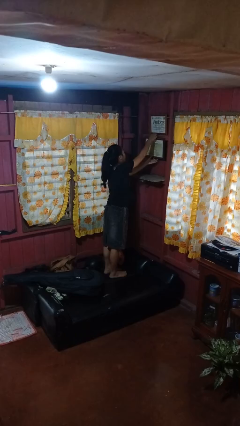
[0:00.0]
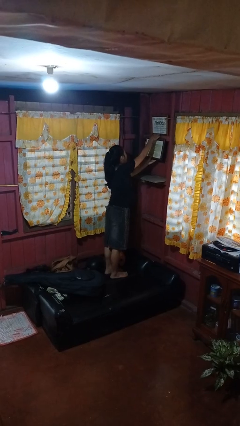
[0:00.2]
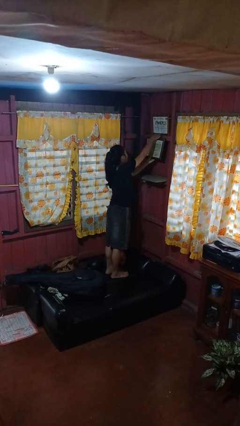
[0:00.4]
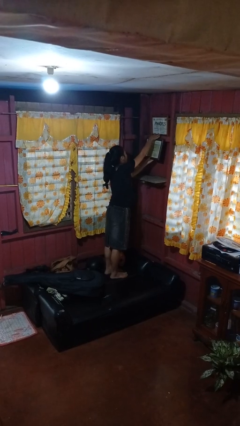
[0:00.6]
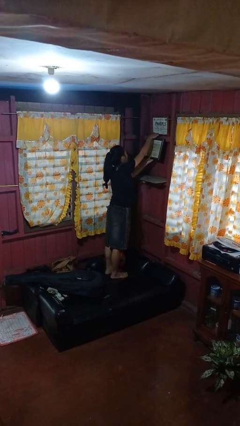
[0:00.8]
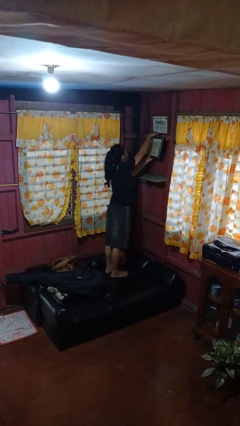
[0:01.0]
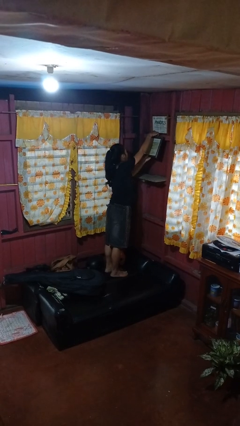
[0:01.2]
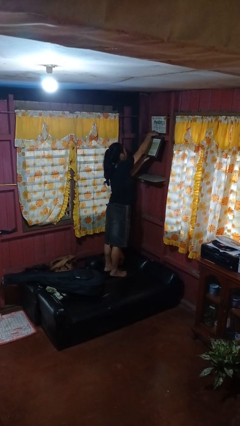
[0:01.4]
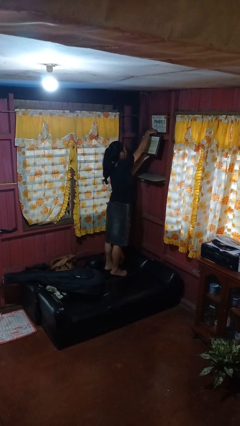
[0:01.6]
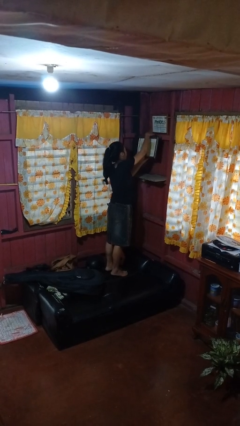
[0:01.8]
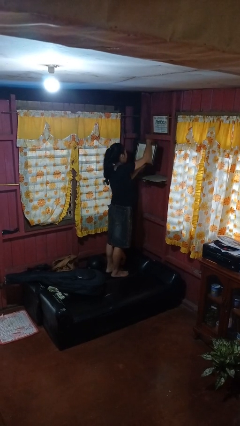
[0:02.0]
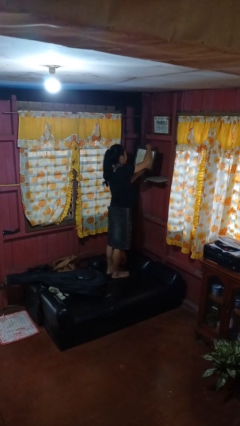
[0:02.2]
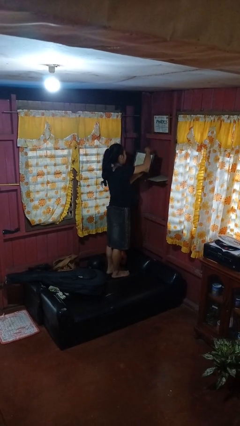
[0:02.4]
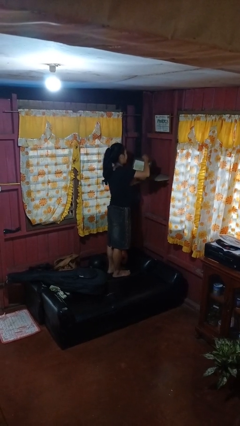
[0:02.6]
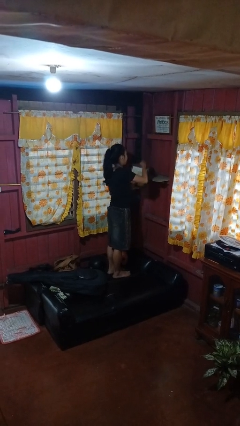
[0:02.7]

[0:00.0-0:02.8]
person takes down picture frame

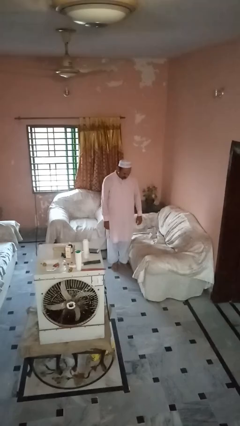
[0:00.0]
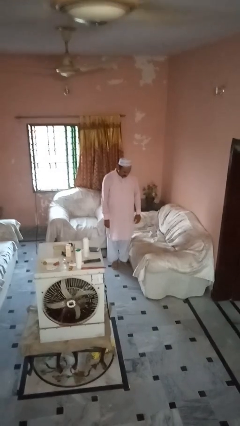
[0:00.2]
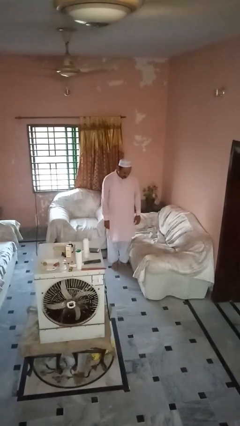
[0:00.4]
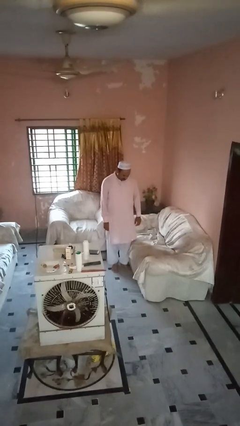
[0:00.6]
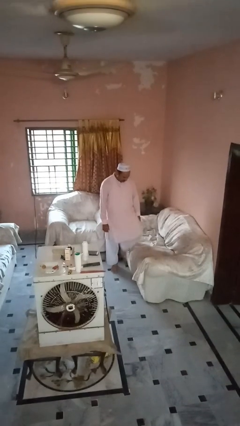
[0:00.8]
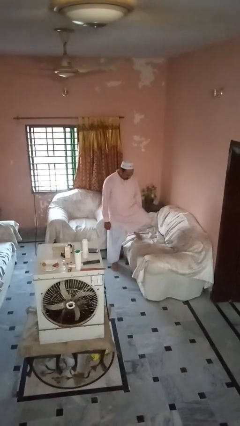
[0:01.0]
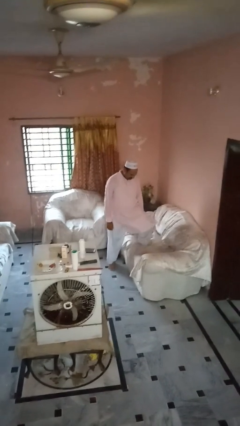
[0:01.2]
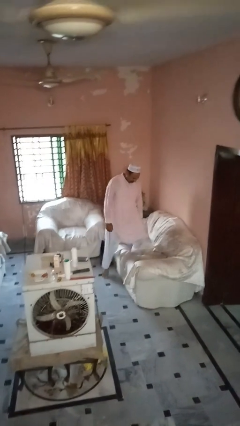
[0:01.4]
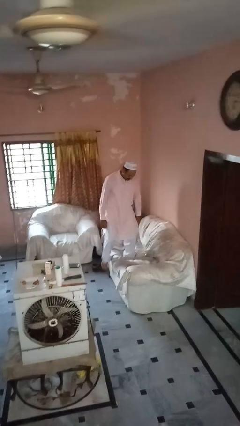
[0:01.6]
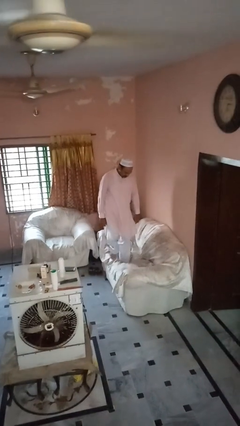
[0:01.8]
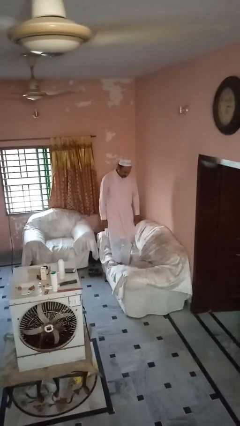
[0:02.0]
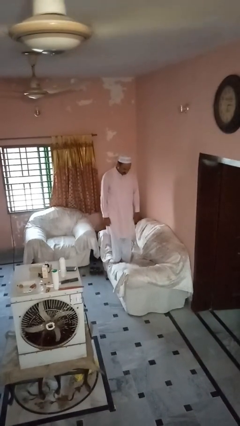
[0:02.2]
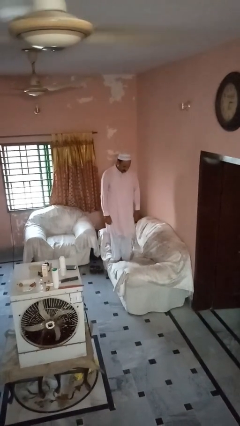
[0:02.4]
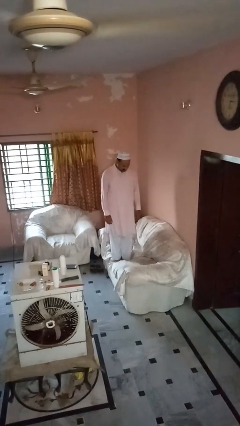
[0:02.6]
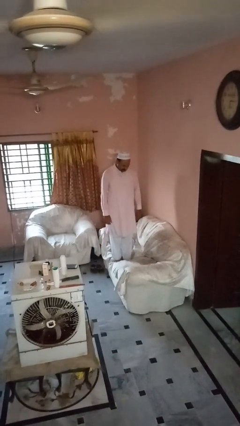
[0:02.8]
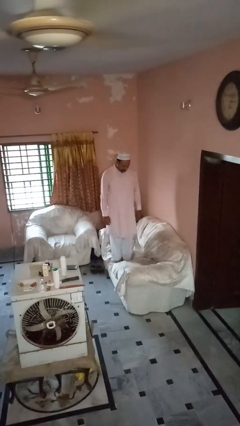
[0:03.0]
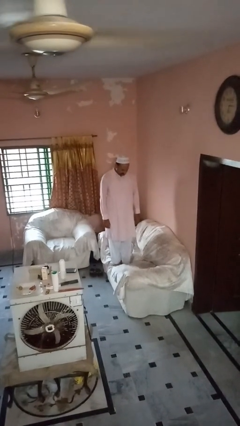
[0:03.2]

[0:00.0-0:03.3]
person climbs on couch

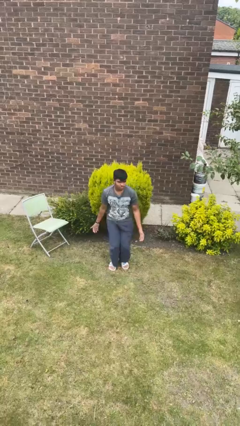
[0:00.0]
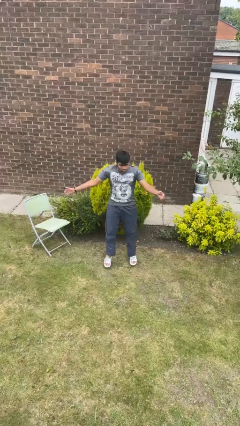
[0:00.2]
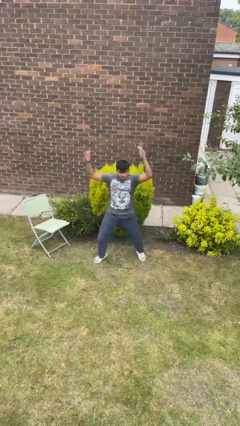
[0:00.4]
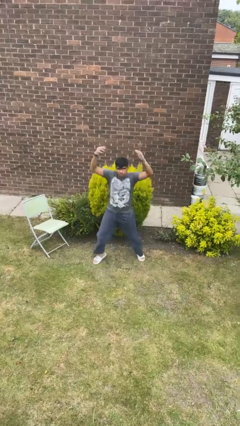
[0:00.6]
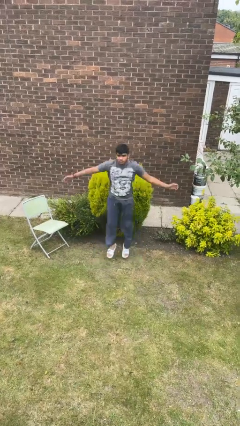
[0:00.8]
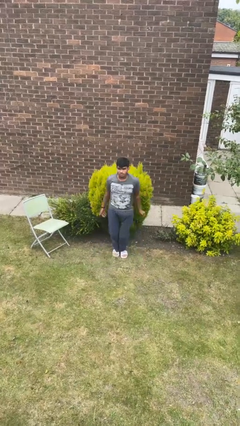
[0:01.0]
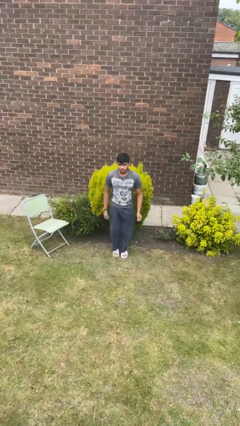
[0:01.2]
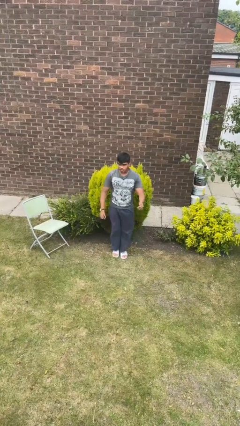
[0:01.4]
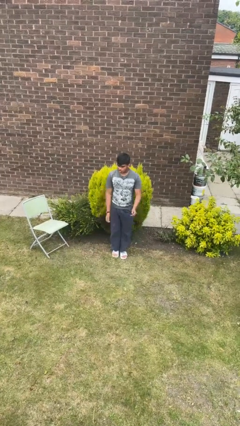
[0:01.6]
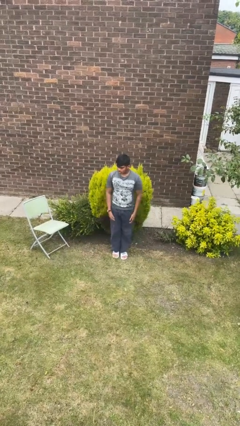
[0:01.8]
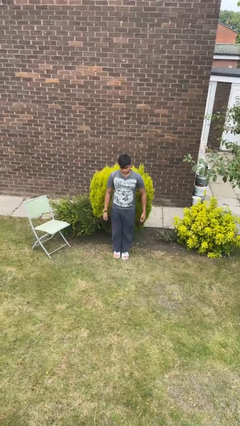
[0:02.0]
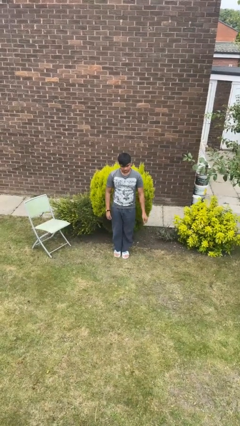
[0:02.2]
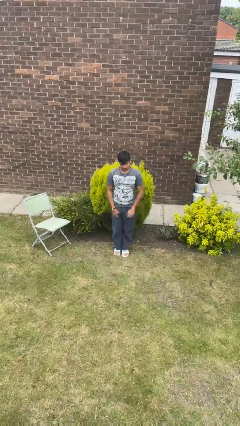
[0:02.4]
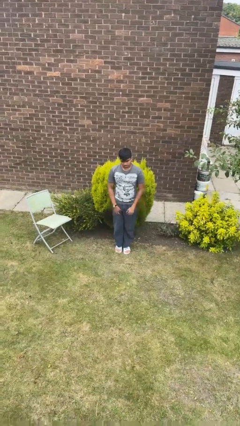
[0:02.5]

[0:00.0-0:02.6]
person exercises with jumping jacks

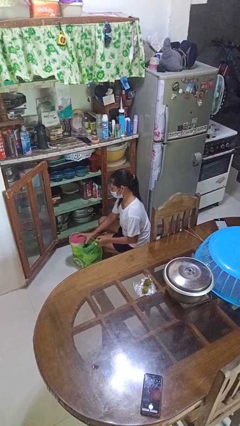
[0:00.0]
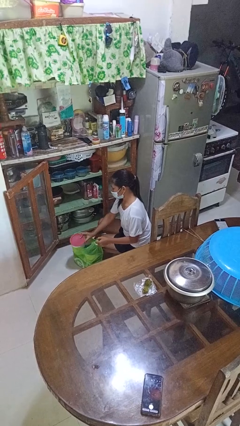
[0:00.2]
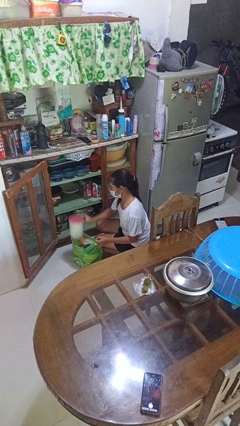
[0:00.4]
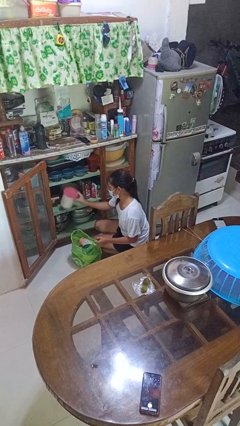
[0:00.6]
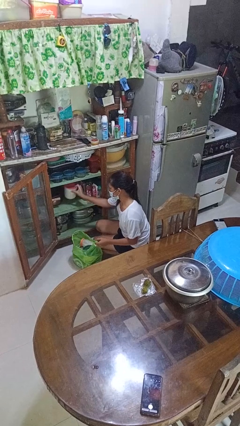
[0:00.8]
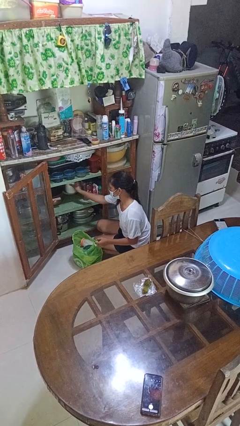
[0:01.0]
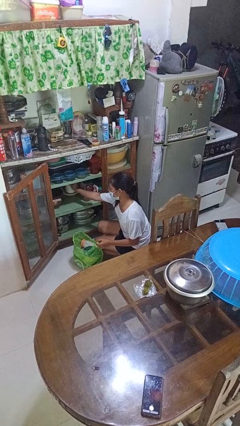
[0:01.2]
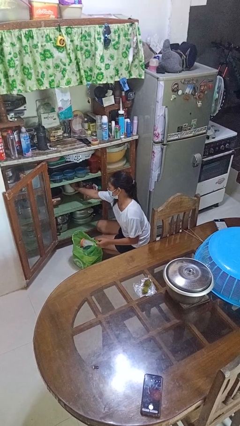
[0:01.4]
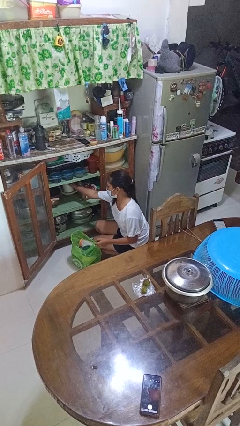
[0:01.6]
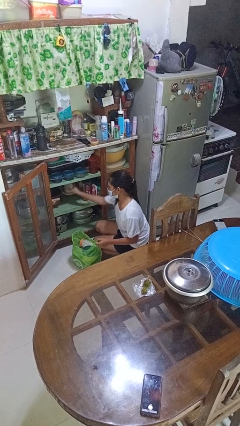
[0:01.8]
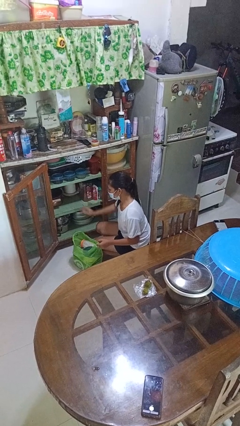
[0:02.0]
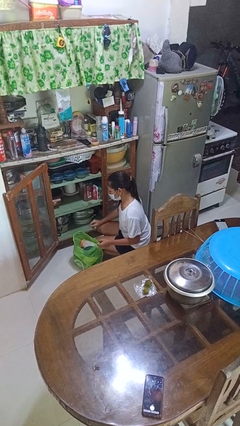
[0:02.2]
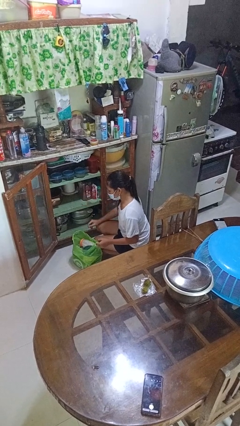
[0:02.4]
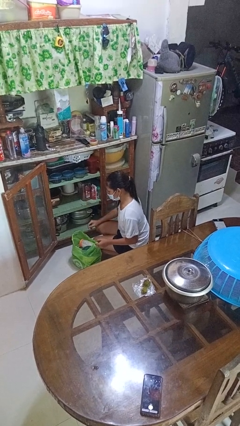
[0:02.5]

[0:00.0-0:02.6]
person loads groceries into cabinet

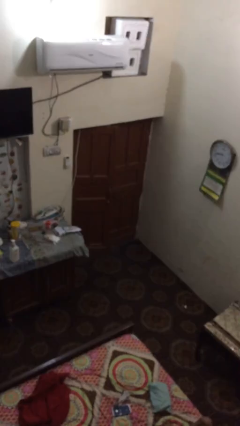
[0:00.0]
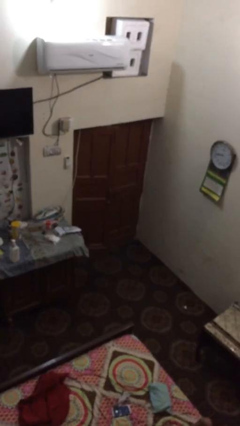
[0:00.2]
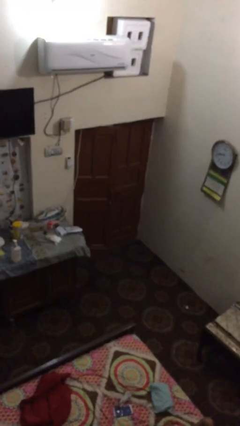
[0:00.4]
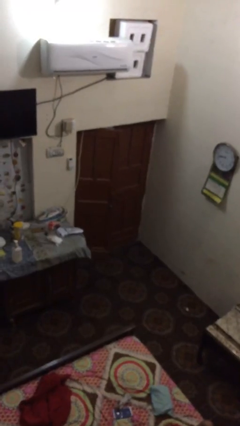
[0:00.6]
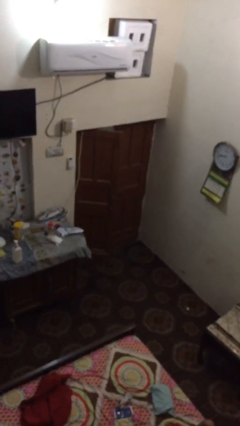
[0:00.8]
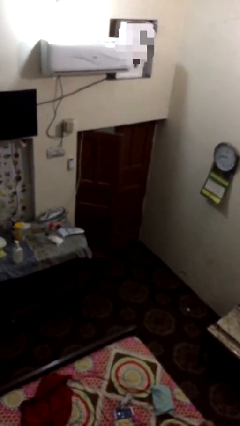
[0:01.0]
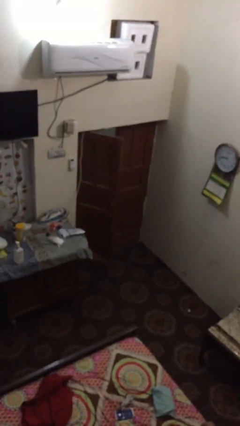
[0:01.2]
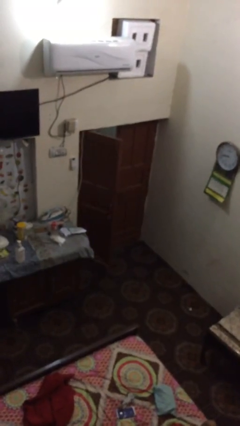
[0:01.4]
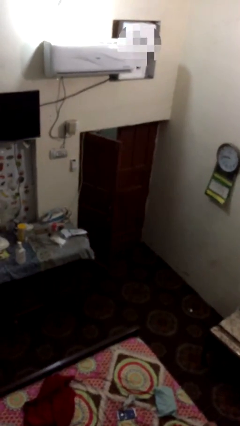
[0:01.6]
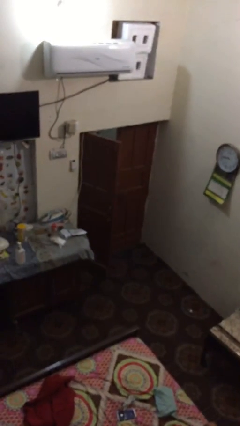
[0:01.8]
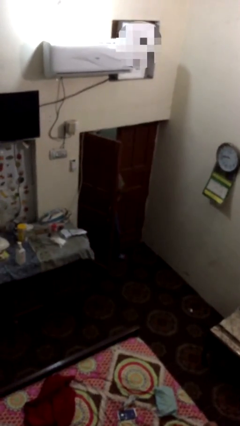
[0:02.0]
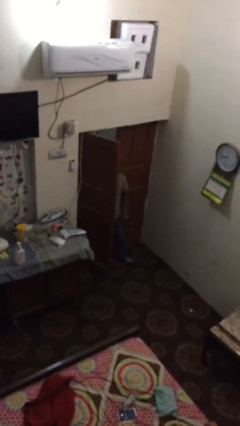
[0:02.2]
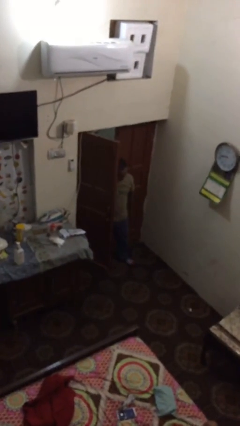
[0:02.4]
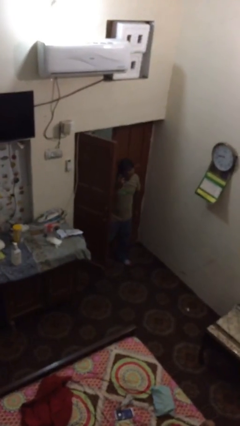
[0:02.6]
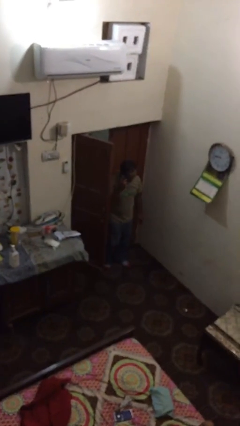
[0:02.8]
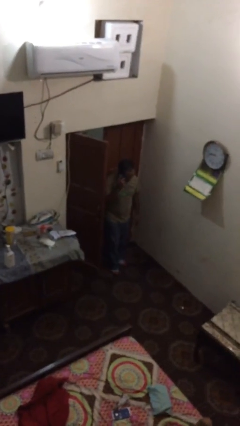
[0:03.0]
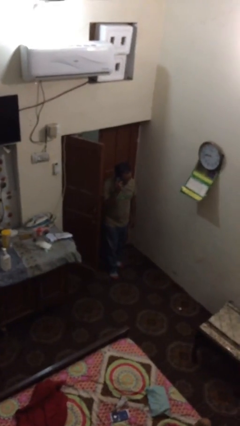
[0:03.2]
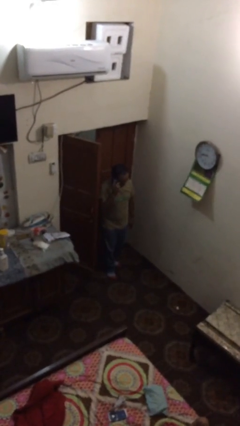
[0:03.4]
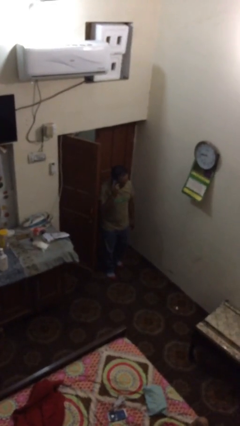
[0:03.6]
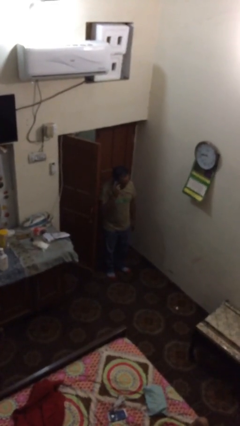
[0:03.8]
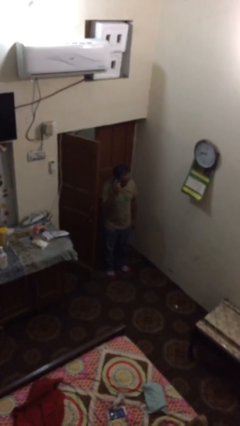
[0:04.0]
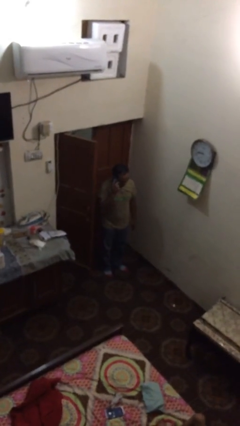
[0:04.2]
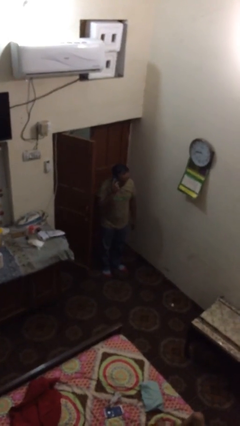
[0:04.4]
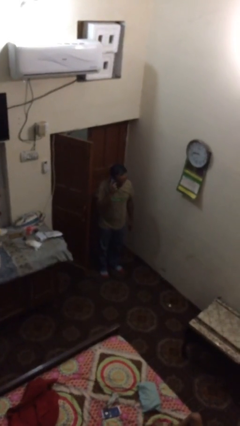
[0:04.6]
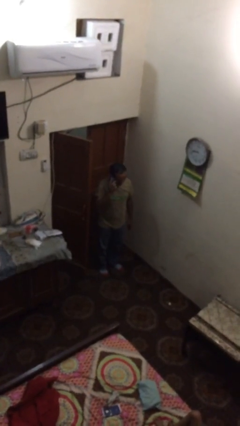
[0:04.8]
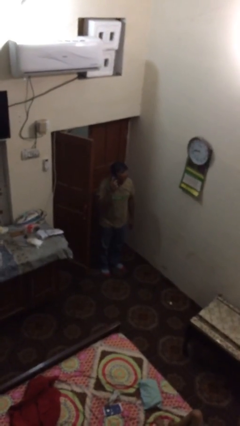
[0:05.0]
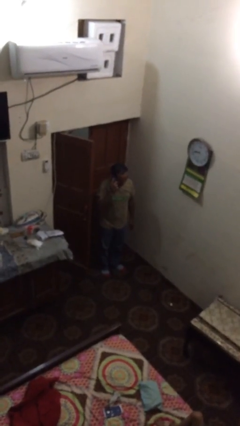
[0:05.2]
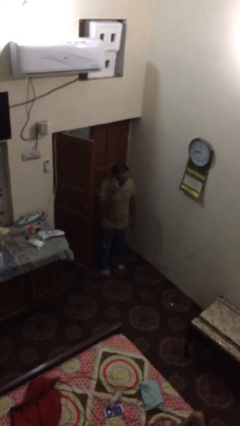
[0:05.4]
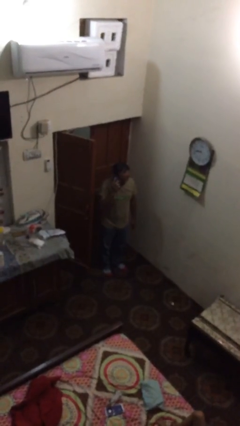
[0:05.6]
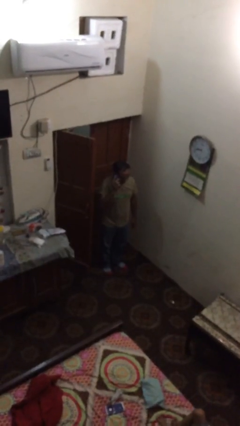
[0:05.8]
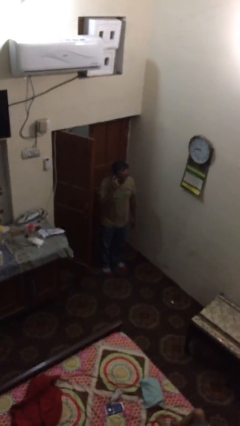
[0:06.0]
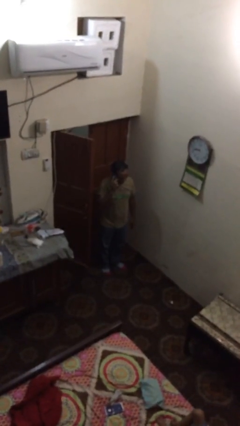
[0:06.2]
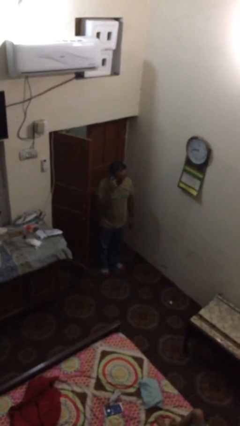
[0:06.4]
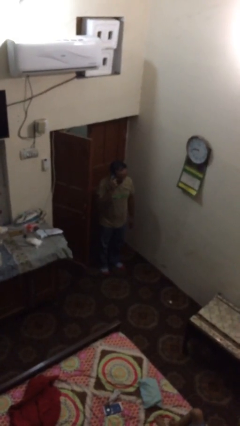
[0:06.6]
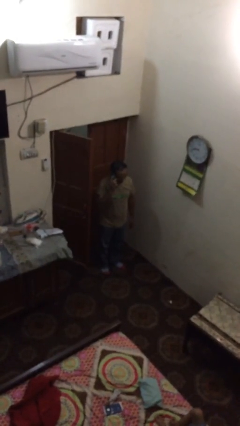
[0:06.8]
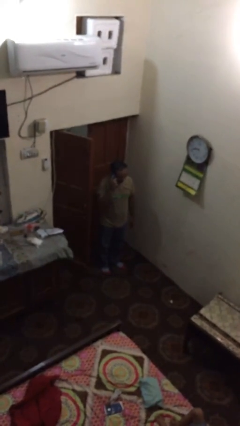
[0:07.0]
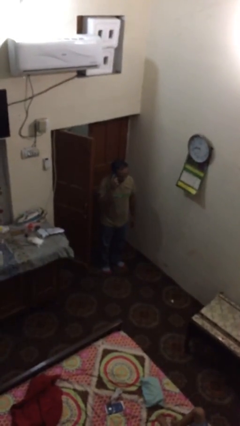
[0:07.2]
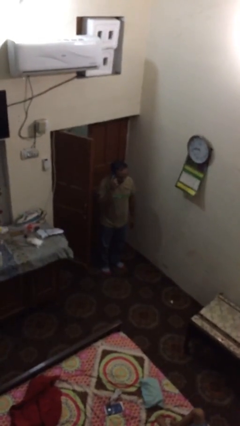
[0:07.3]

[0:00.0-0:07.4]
person enters scene through structure
